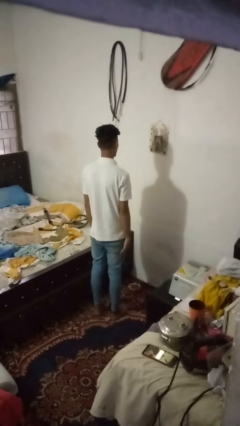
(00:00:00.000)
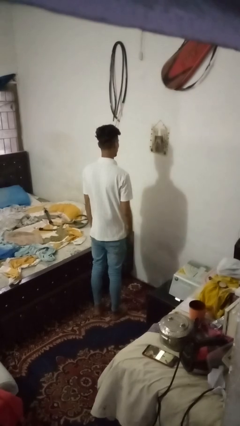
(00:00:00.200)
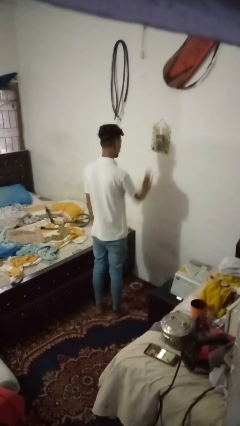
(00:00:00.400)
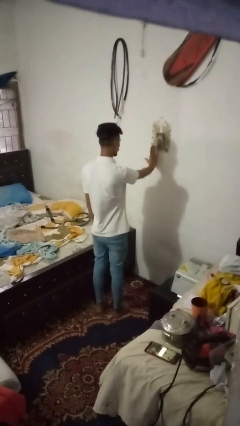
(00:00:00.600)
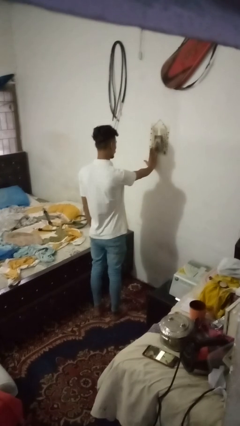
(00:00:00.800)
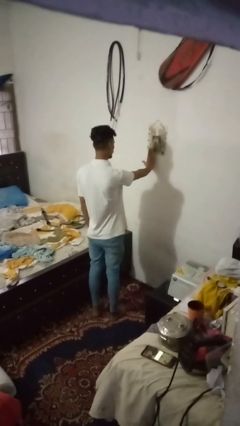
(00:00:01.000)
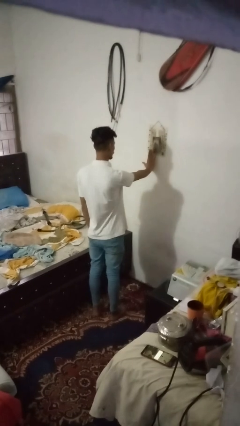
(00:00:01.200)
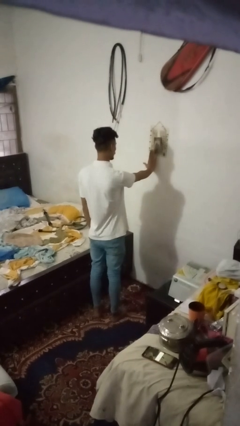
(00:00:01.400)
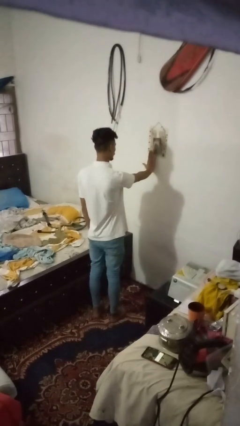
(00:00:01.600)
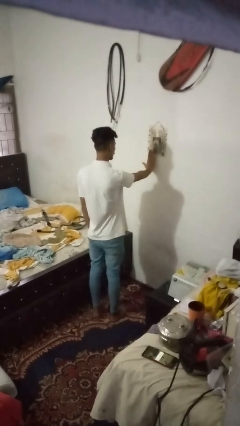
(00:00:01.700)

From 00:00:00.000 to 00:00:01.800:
person gestures stop

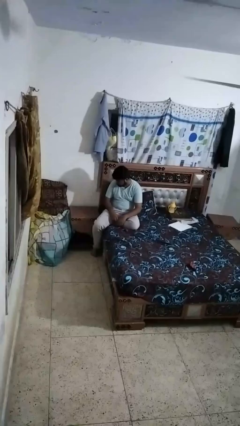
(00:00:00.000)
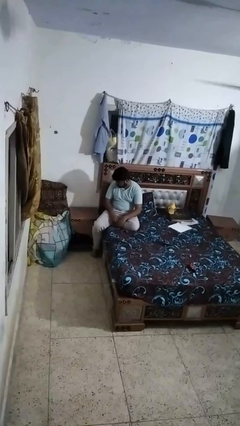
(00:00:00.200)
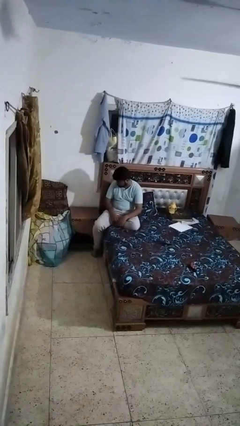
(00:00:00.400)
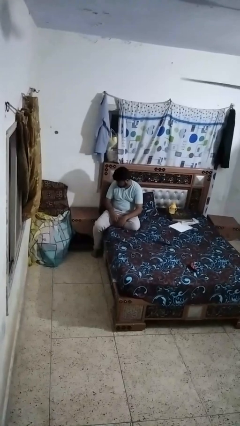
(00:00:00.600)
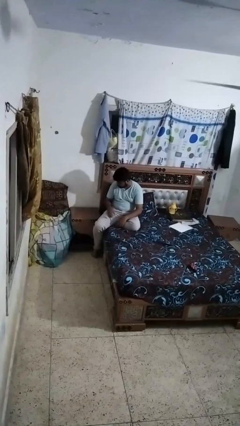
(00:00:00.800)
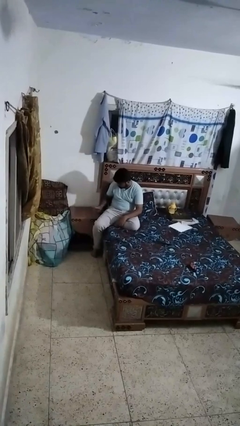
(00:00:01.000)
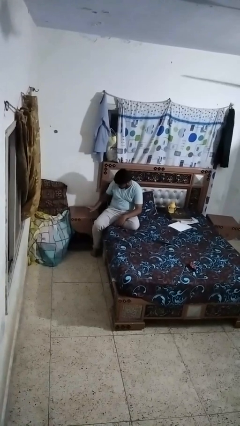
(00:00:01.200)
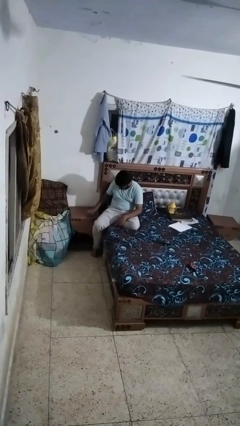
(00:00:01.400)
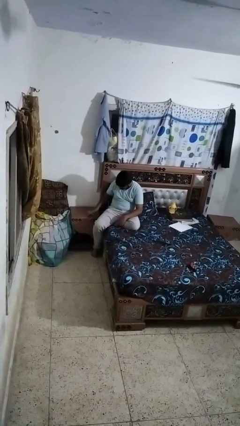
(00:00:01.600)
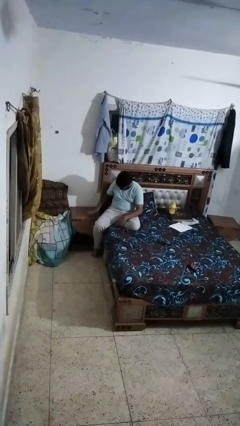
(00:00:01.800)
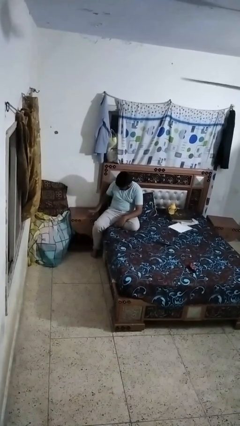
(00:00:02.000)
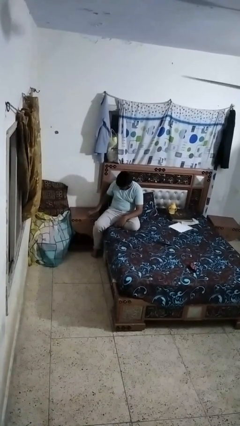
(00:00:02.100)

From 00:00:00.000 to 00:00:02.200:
person taps object with finger

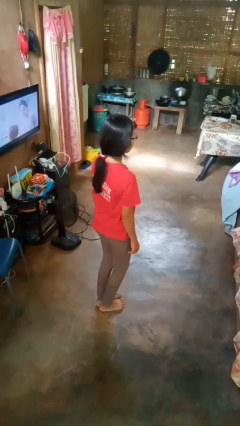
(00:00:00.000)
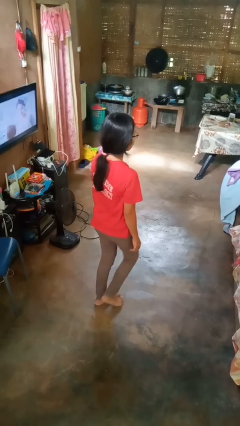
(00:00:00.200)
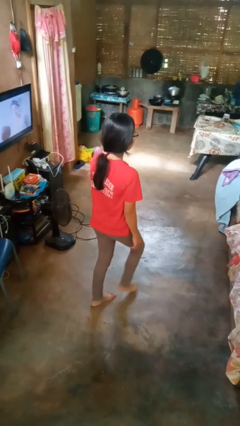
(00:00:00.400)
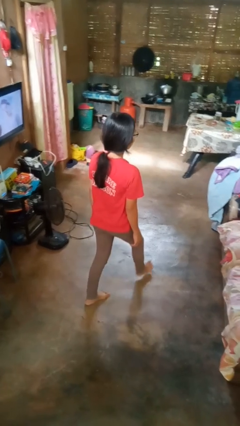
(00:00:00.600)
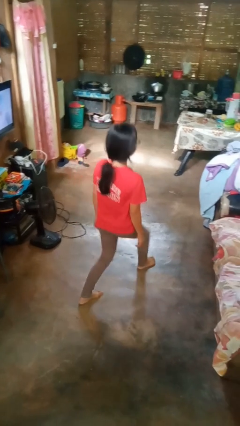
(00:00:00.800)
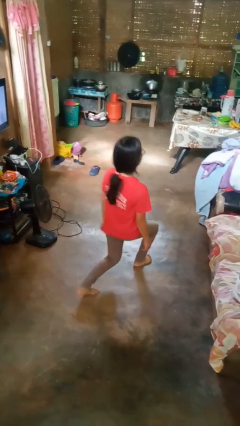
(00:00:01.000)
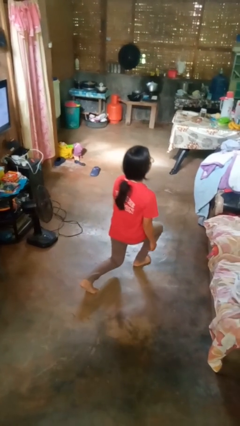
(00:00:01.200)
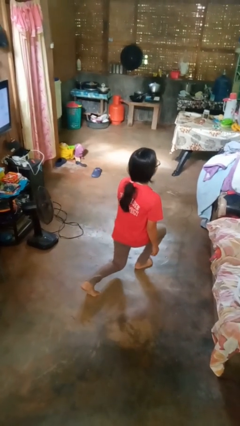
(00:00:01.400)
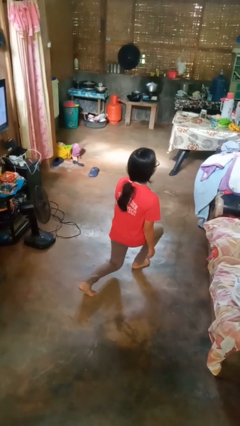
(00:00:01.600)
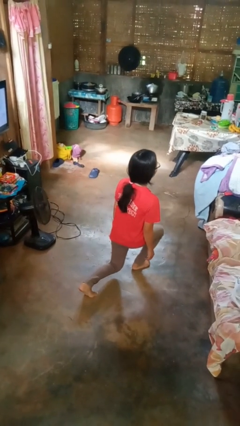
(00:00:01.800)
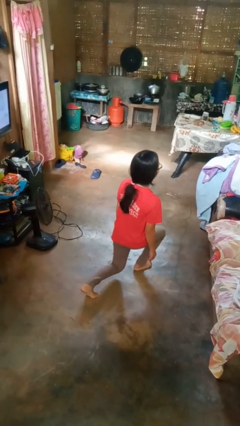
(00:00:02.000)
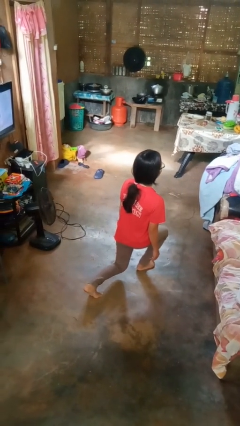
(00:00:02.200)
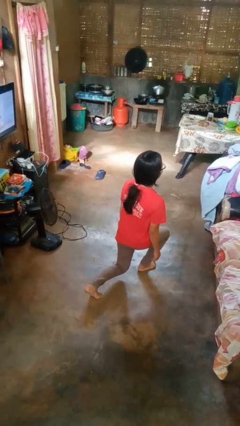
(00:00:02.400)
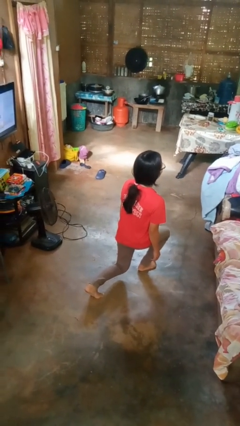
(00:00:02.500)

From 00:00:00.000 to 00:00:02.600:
person exercises with lunges

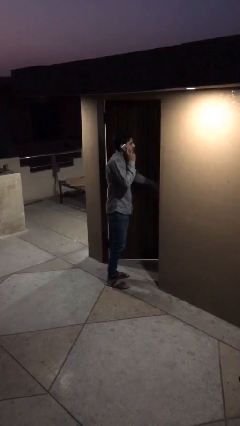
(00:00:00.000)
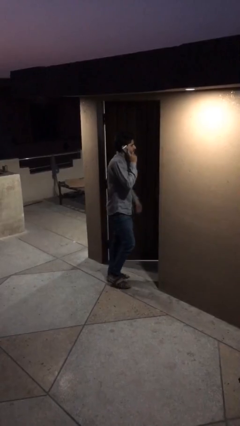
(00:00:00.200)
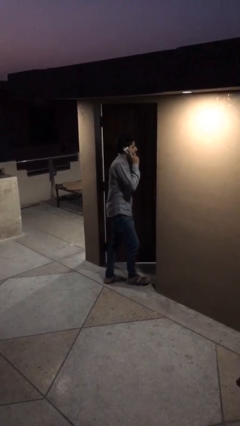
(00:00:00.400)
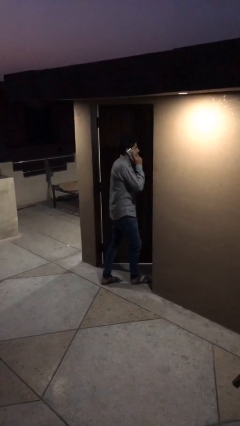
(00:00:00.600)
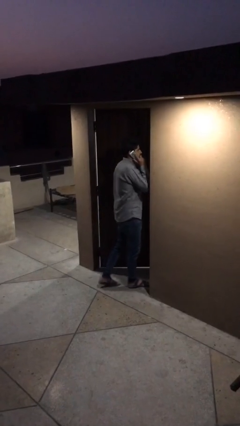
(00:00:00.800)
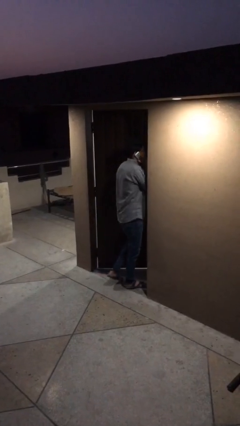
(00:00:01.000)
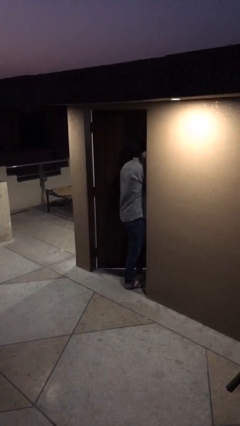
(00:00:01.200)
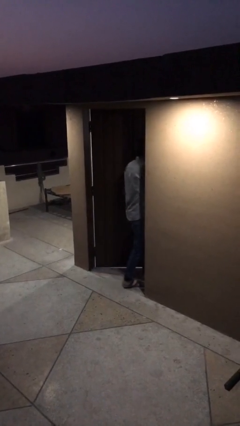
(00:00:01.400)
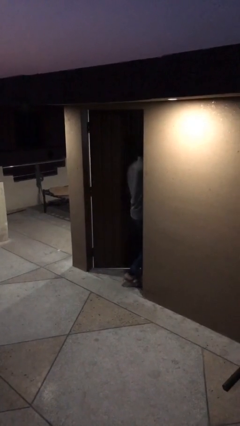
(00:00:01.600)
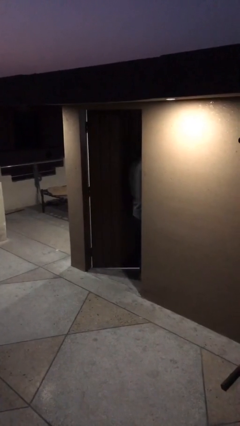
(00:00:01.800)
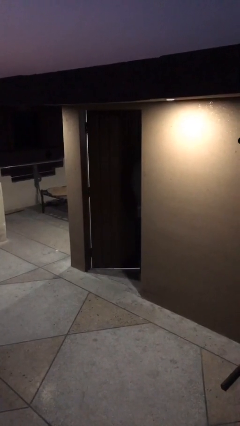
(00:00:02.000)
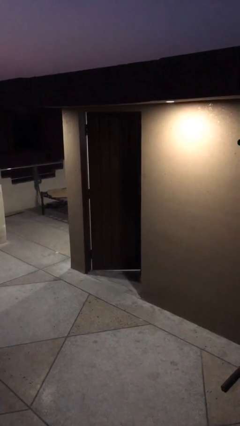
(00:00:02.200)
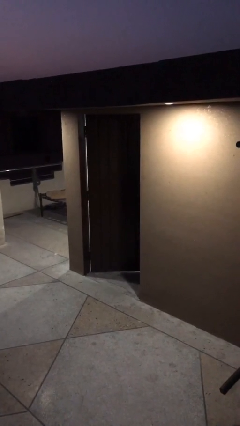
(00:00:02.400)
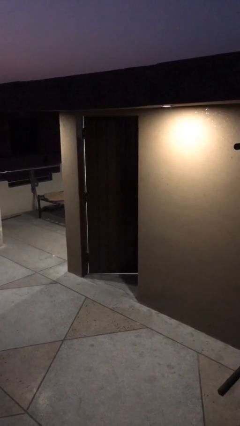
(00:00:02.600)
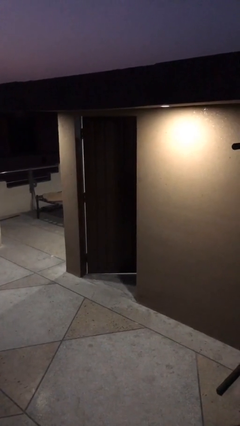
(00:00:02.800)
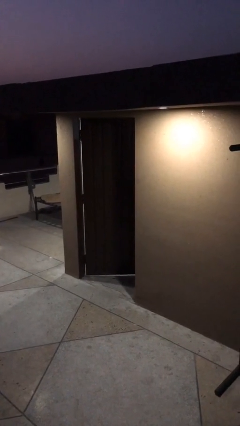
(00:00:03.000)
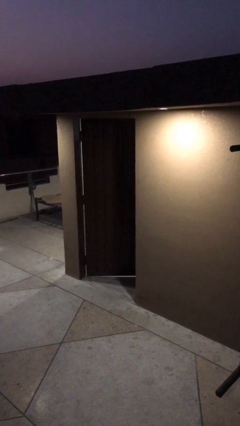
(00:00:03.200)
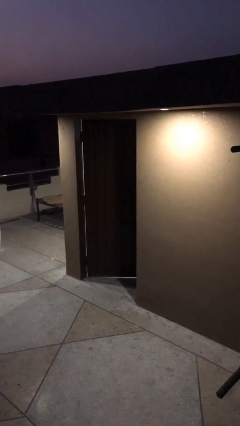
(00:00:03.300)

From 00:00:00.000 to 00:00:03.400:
person exits scene through structure

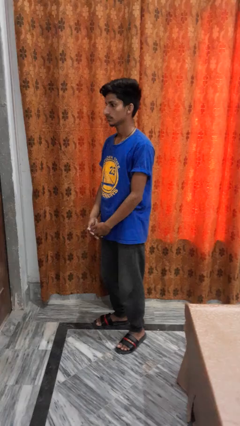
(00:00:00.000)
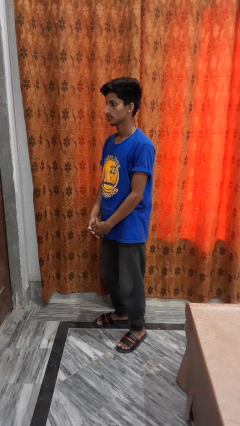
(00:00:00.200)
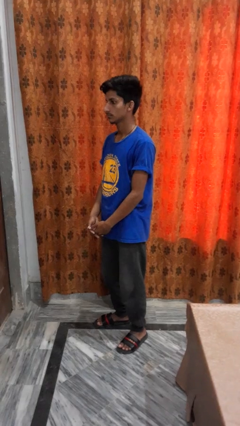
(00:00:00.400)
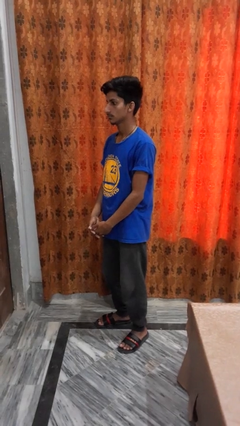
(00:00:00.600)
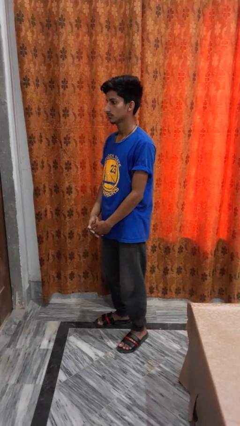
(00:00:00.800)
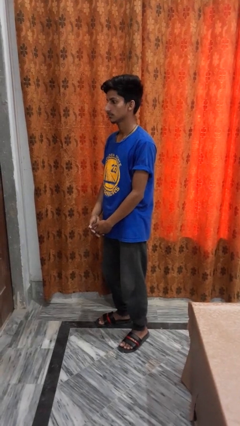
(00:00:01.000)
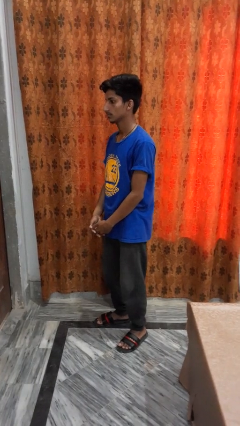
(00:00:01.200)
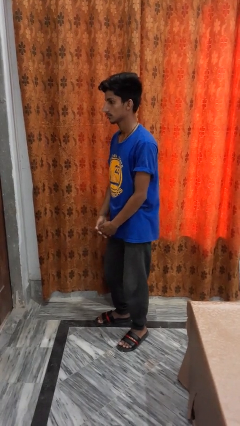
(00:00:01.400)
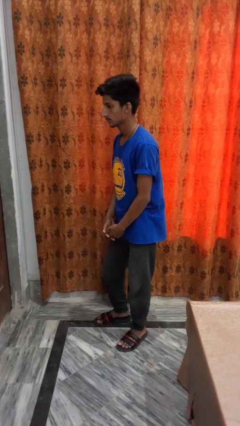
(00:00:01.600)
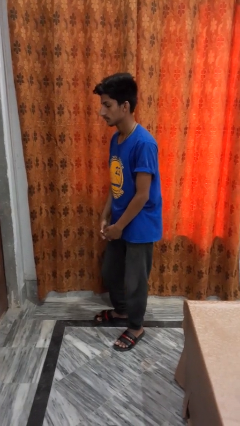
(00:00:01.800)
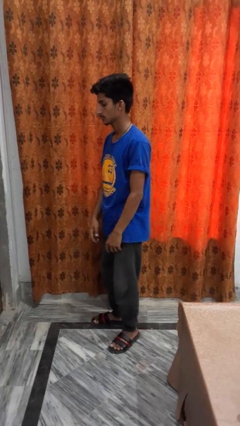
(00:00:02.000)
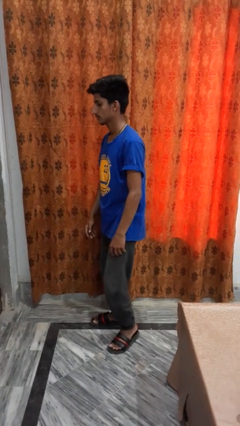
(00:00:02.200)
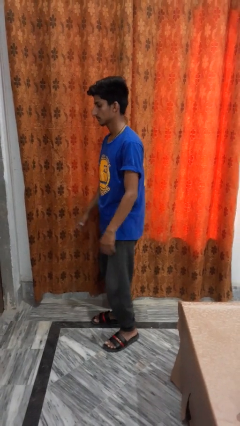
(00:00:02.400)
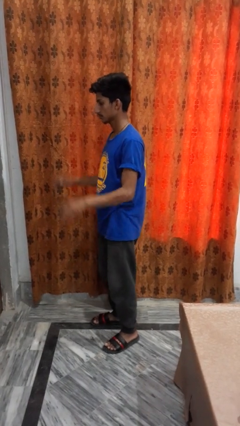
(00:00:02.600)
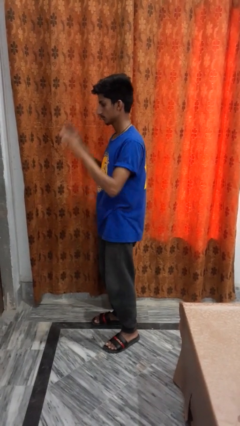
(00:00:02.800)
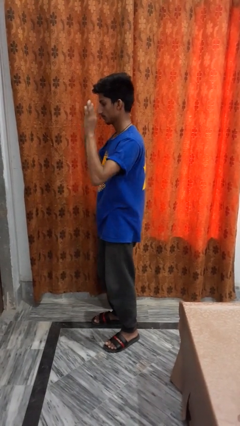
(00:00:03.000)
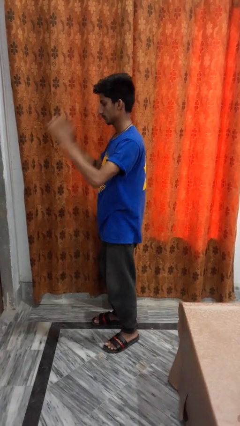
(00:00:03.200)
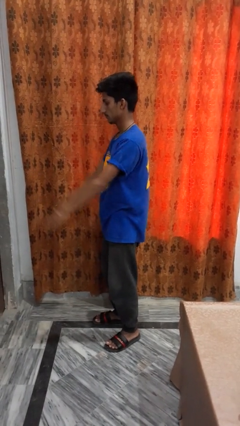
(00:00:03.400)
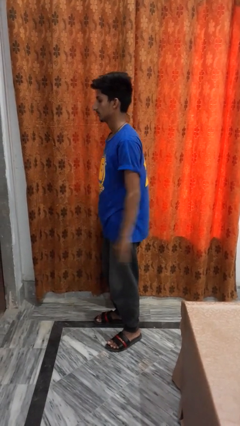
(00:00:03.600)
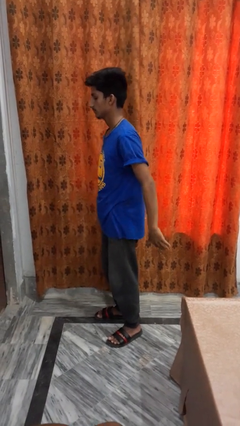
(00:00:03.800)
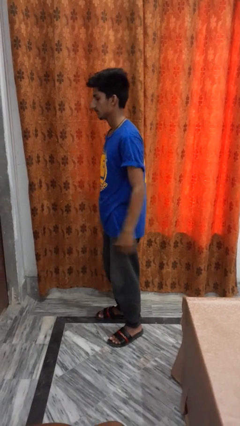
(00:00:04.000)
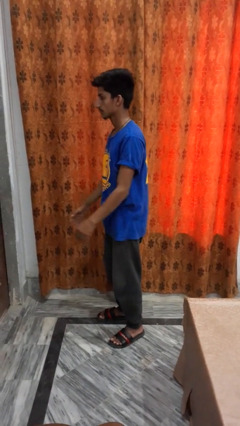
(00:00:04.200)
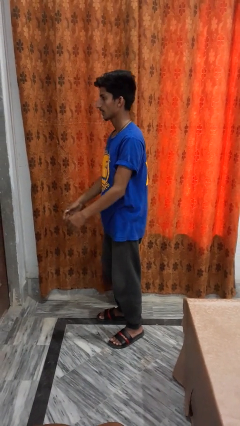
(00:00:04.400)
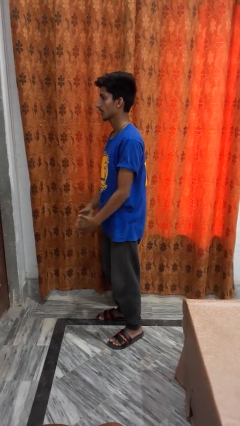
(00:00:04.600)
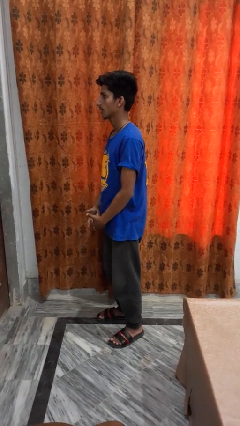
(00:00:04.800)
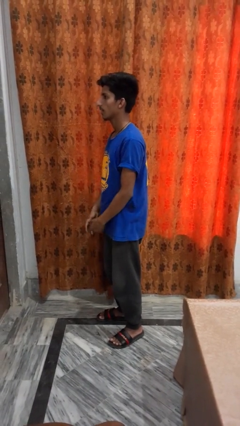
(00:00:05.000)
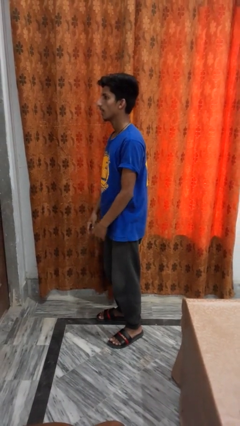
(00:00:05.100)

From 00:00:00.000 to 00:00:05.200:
person highfives hand

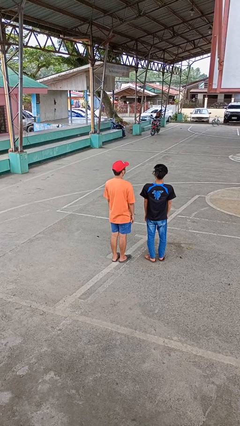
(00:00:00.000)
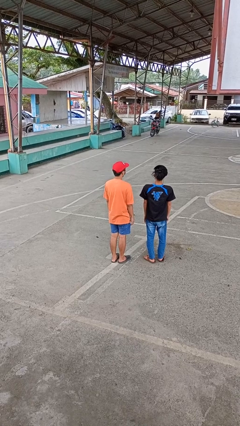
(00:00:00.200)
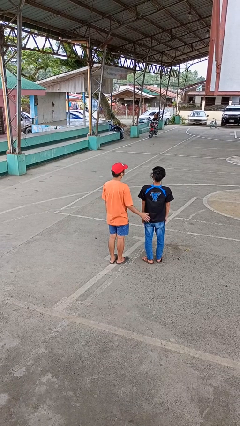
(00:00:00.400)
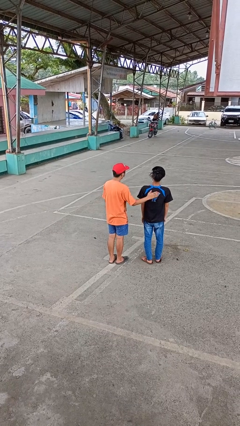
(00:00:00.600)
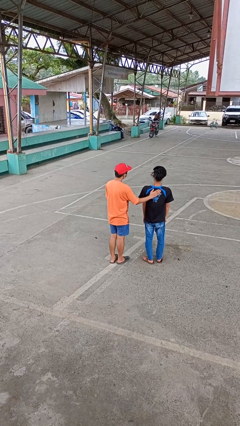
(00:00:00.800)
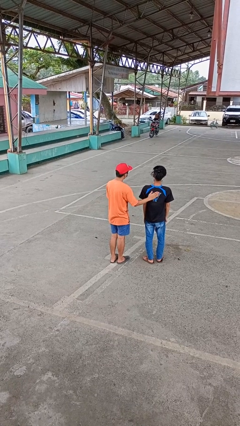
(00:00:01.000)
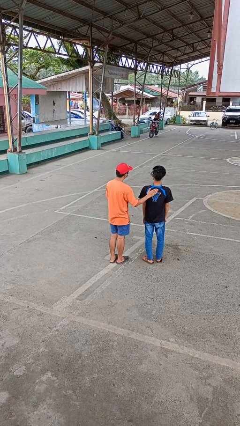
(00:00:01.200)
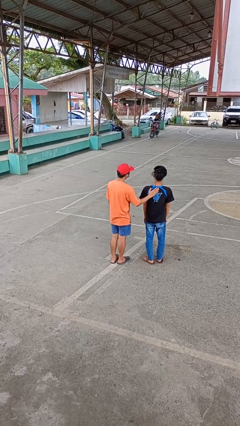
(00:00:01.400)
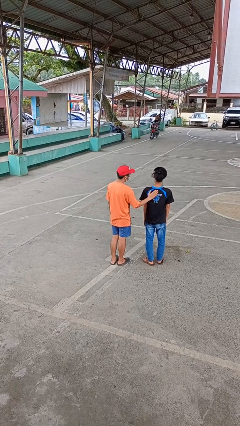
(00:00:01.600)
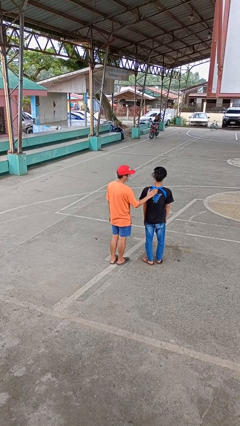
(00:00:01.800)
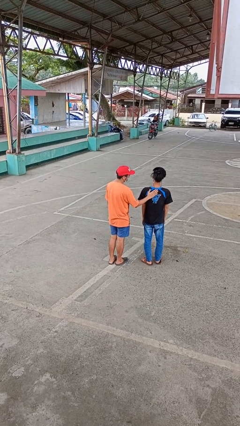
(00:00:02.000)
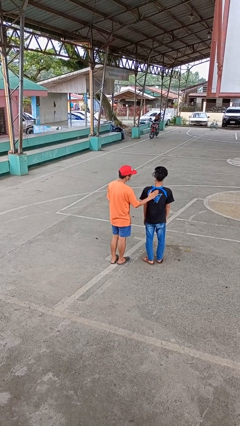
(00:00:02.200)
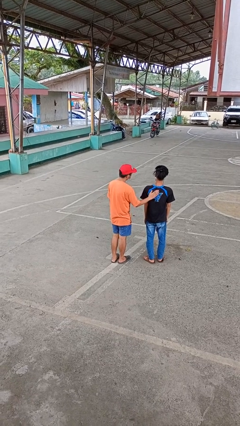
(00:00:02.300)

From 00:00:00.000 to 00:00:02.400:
person touches back of person
